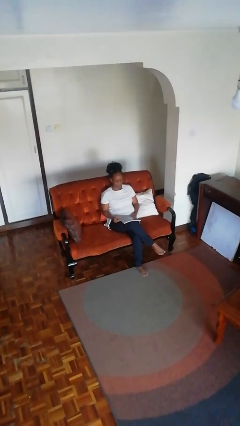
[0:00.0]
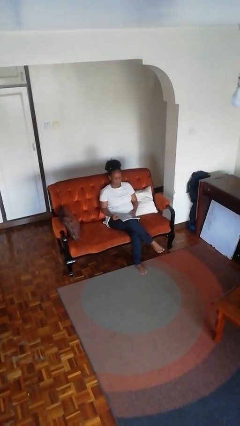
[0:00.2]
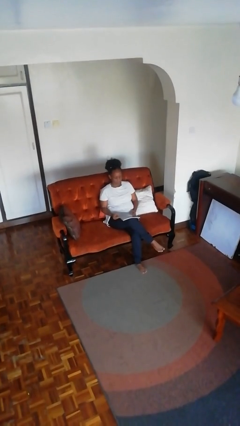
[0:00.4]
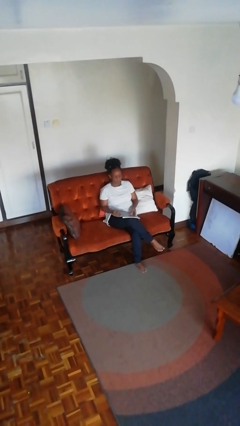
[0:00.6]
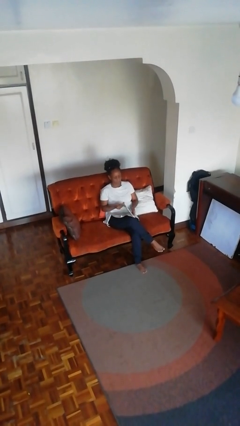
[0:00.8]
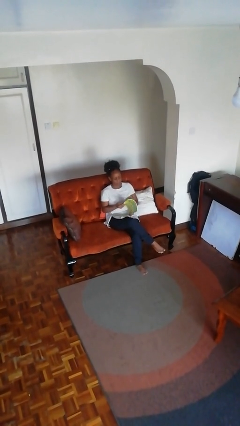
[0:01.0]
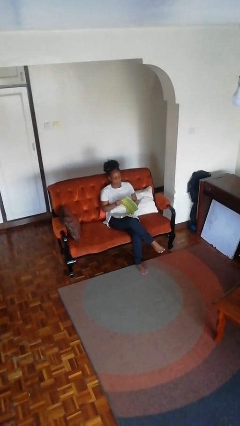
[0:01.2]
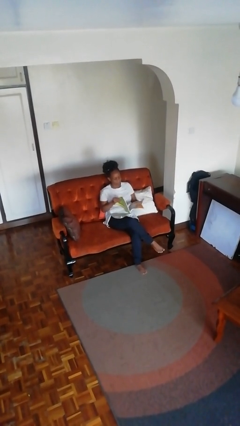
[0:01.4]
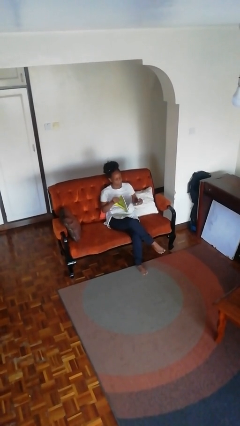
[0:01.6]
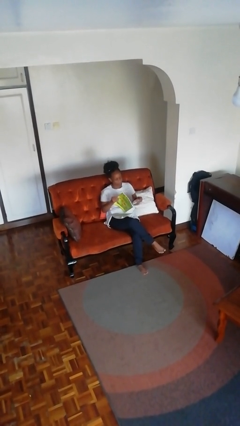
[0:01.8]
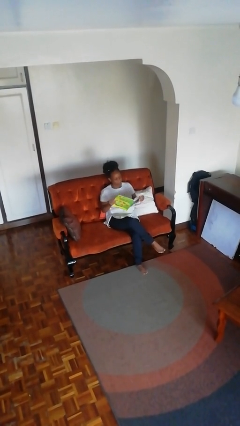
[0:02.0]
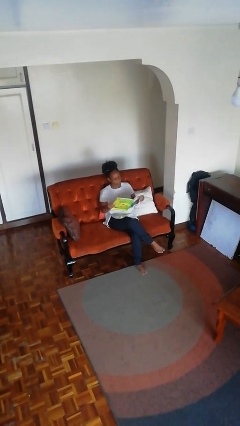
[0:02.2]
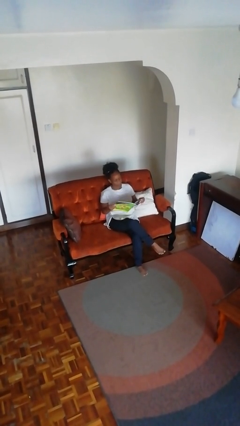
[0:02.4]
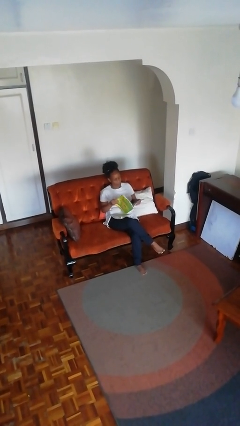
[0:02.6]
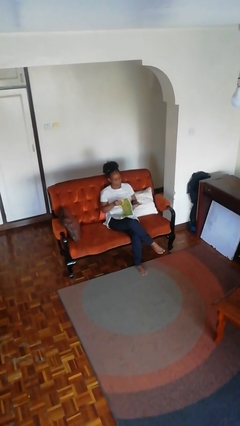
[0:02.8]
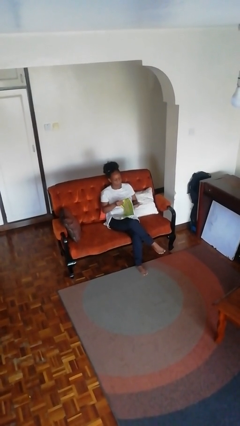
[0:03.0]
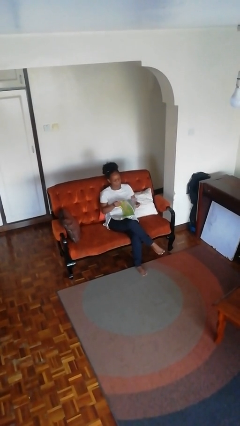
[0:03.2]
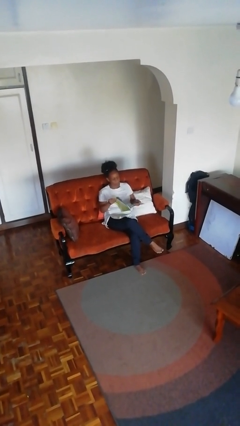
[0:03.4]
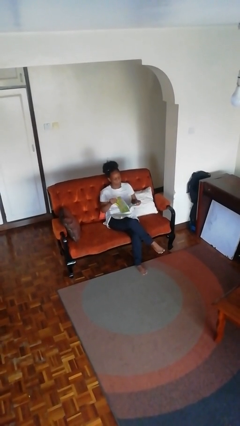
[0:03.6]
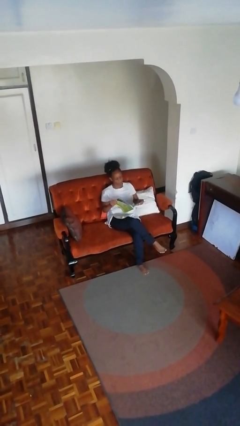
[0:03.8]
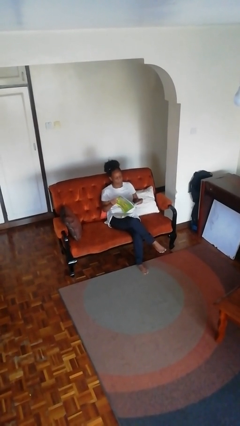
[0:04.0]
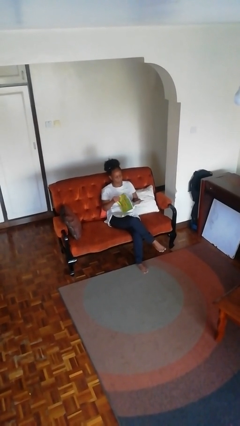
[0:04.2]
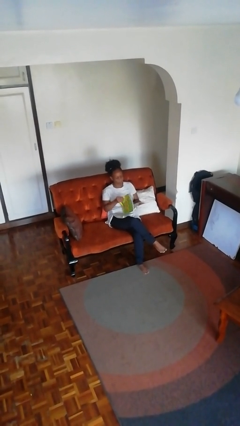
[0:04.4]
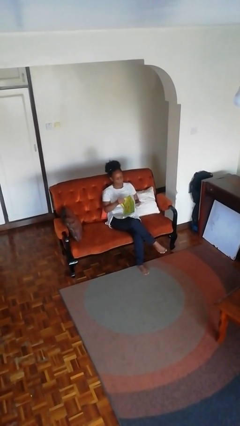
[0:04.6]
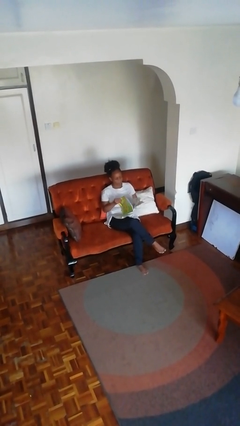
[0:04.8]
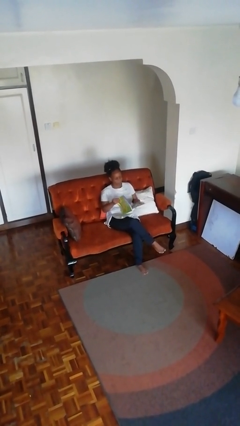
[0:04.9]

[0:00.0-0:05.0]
person reads magazine

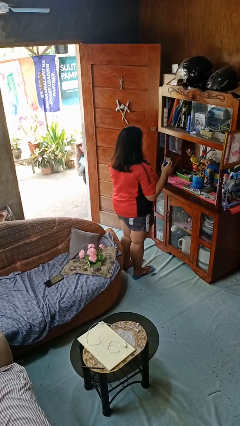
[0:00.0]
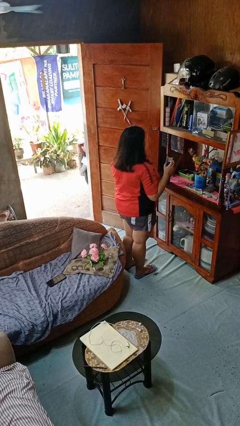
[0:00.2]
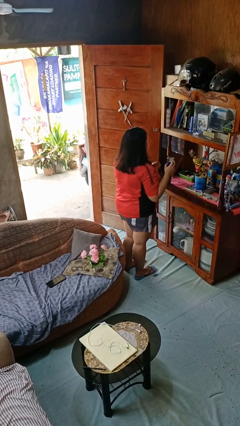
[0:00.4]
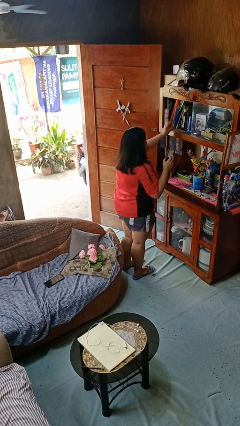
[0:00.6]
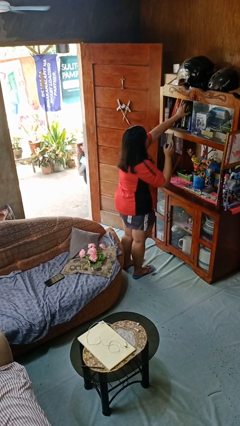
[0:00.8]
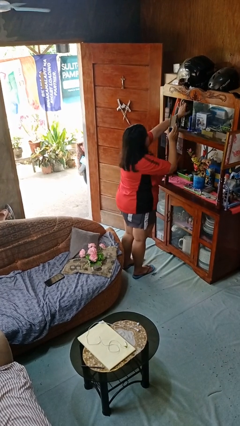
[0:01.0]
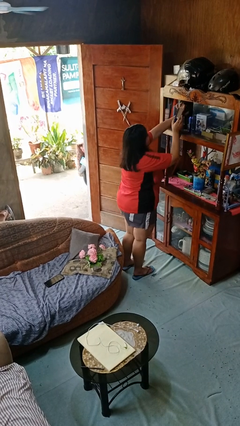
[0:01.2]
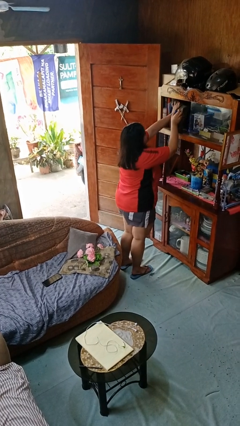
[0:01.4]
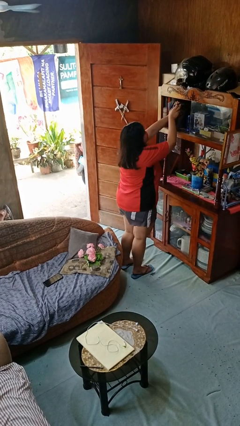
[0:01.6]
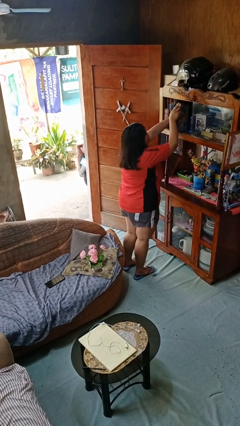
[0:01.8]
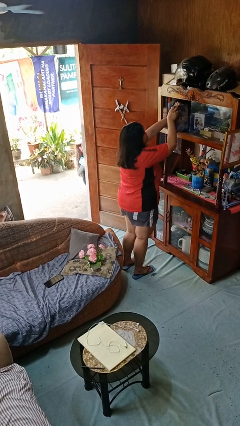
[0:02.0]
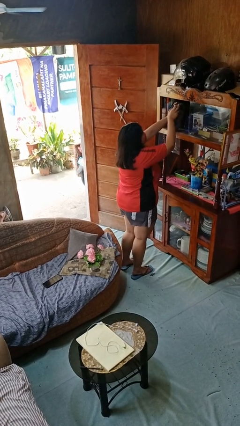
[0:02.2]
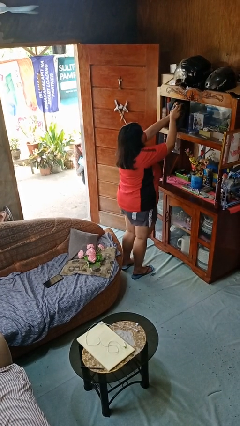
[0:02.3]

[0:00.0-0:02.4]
person puts down object on shelf

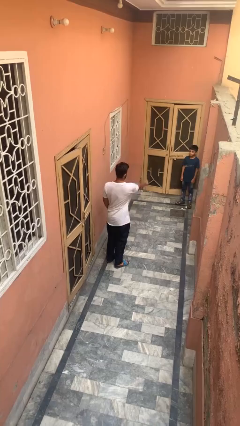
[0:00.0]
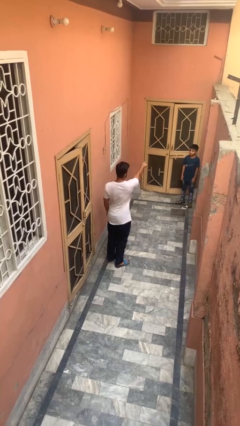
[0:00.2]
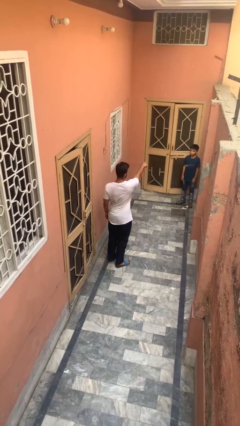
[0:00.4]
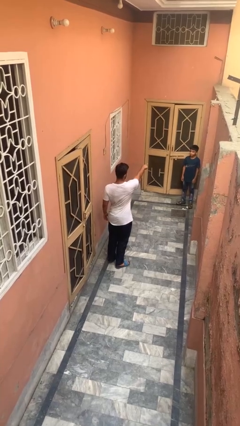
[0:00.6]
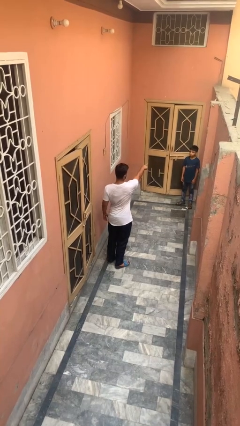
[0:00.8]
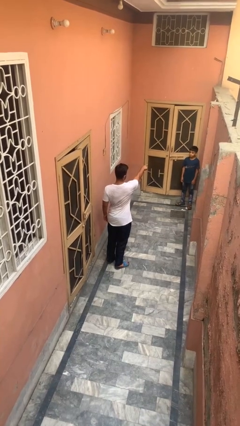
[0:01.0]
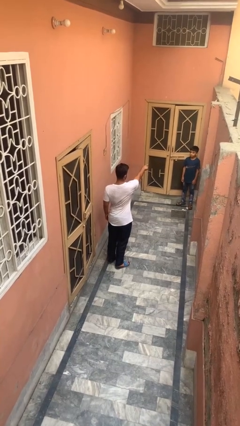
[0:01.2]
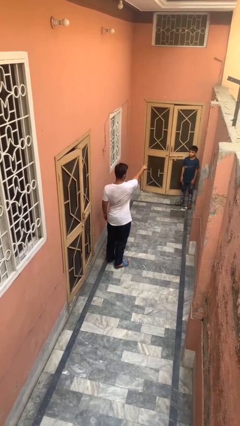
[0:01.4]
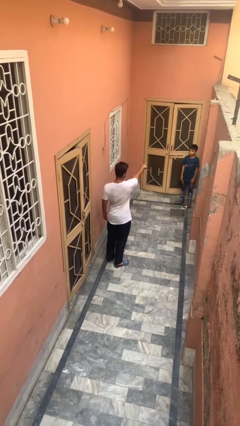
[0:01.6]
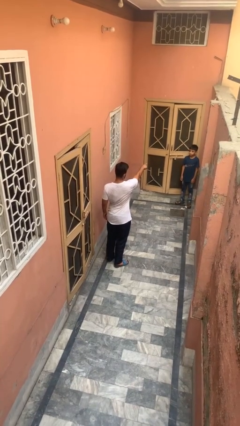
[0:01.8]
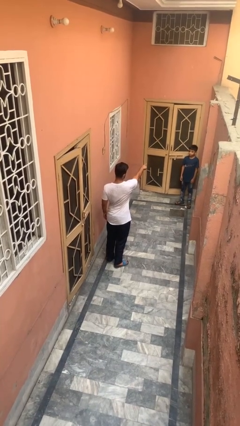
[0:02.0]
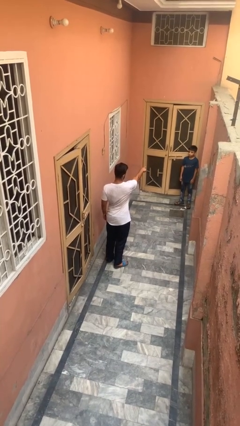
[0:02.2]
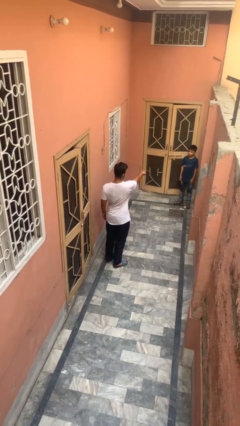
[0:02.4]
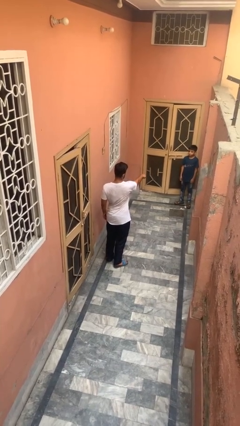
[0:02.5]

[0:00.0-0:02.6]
person points at person

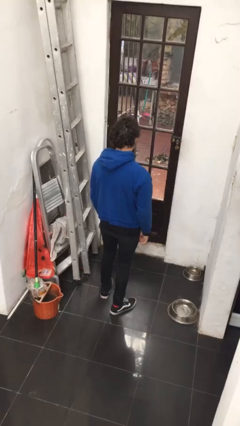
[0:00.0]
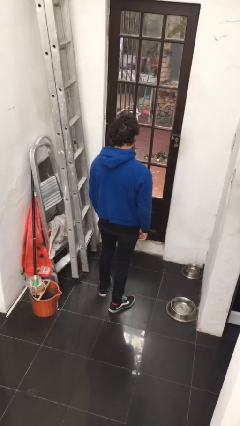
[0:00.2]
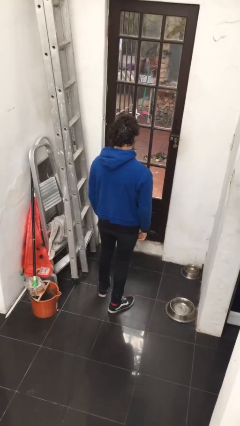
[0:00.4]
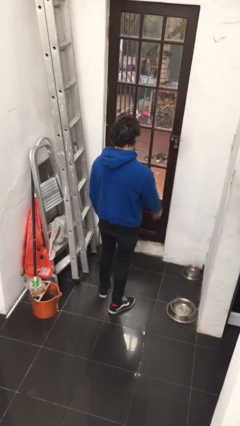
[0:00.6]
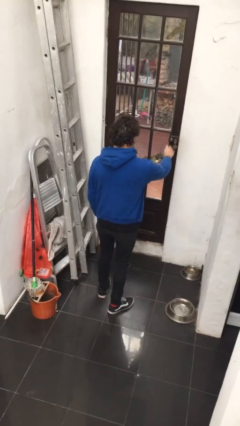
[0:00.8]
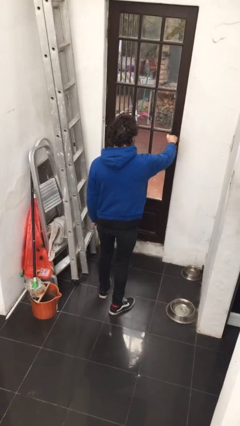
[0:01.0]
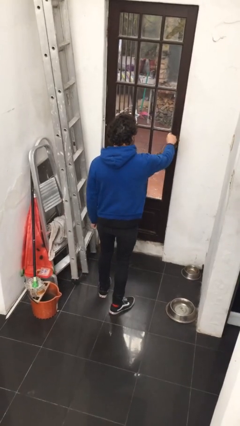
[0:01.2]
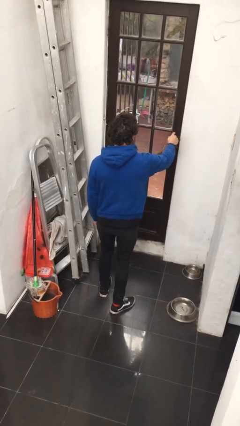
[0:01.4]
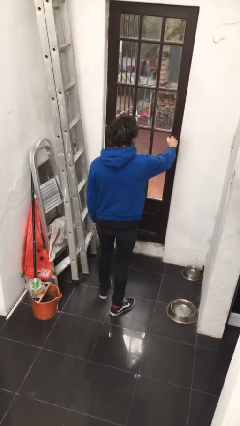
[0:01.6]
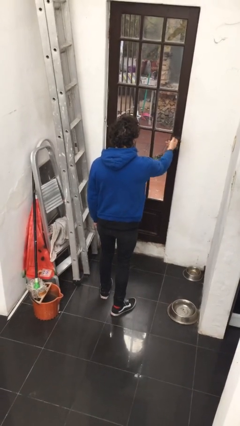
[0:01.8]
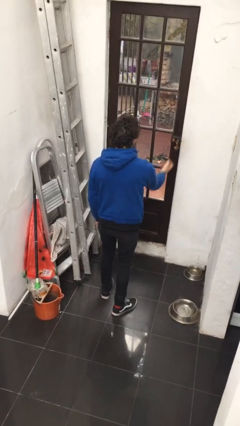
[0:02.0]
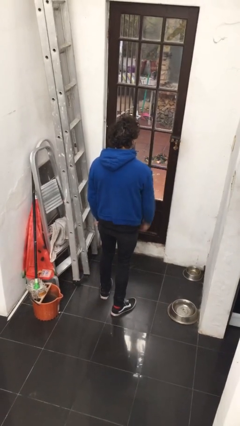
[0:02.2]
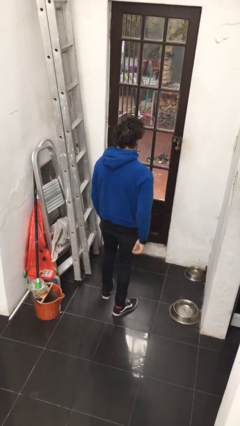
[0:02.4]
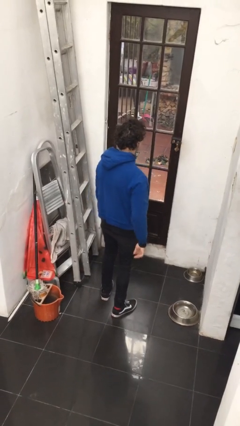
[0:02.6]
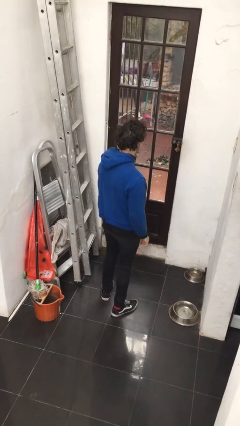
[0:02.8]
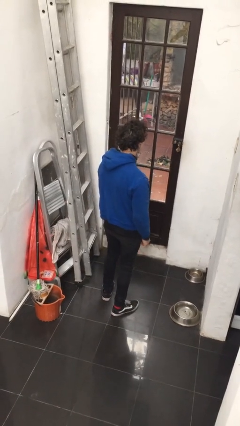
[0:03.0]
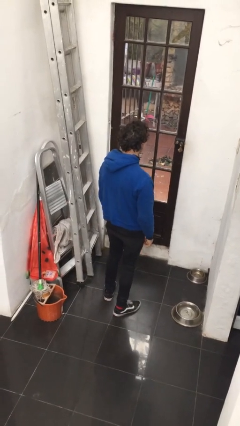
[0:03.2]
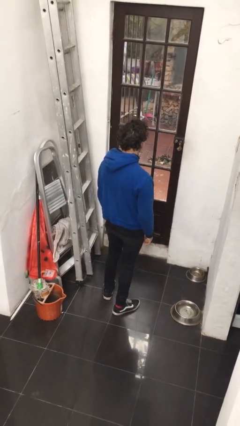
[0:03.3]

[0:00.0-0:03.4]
person locks door with keys

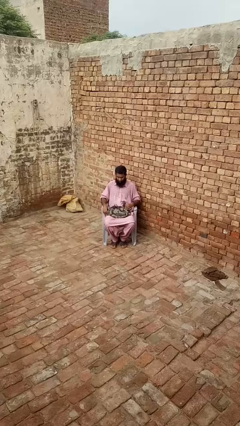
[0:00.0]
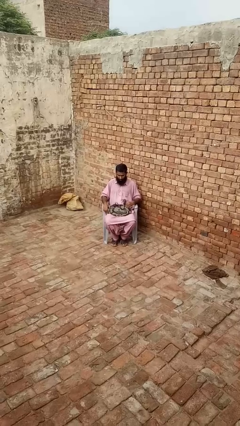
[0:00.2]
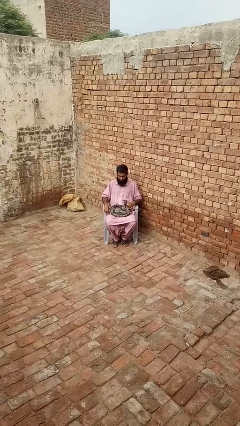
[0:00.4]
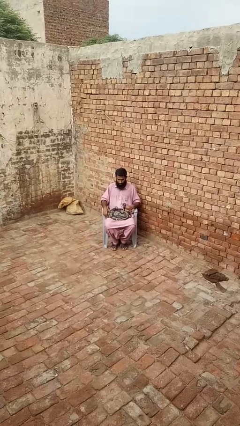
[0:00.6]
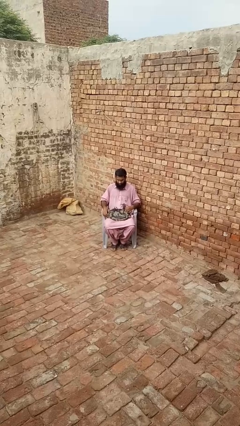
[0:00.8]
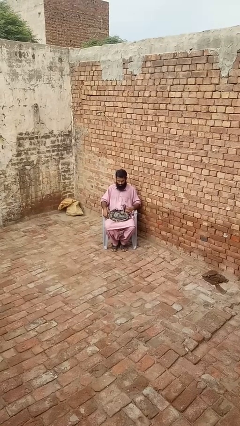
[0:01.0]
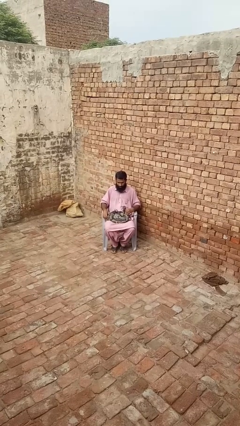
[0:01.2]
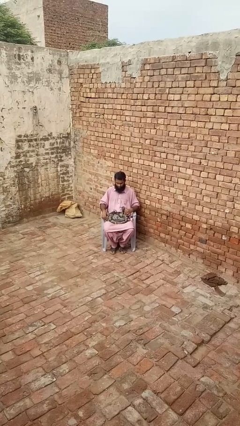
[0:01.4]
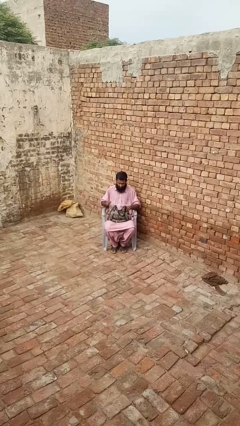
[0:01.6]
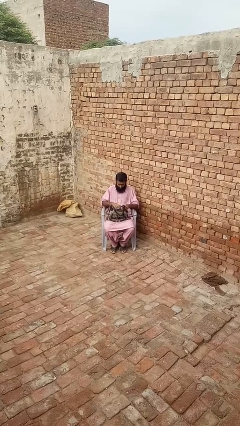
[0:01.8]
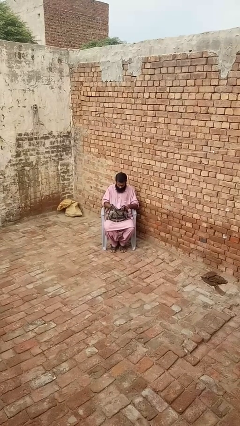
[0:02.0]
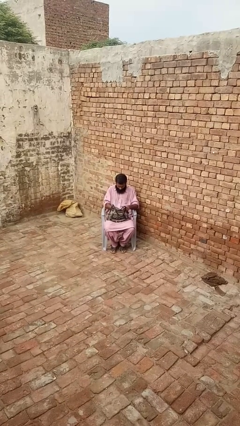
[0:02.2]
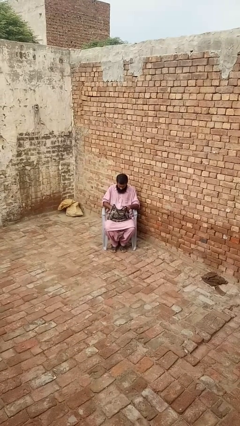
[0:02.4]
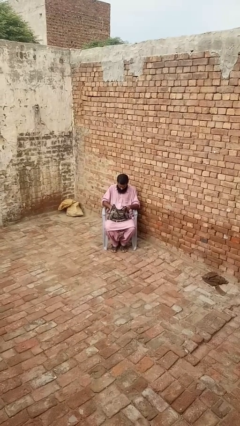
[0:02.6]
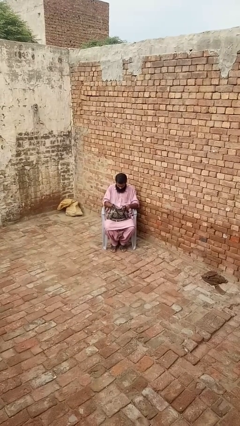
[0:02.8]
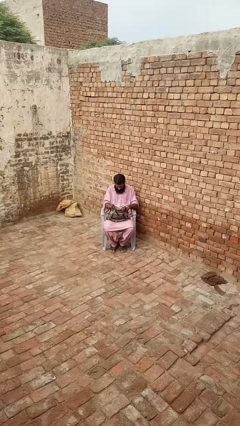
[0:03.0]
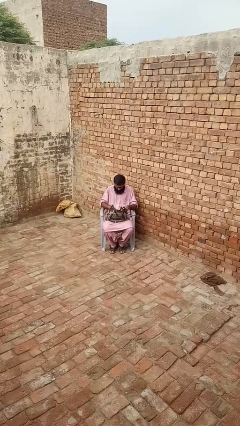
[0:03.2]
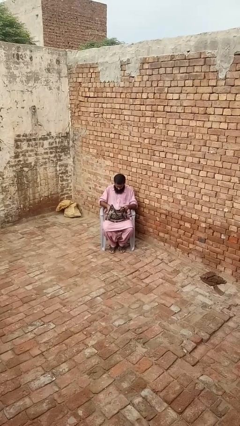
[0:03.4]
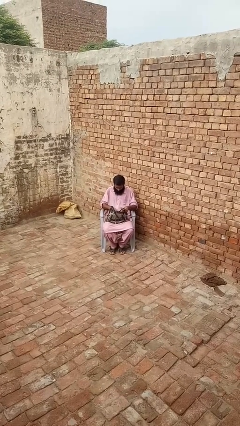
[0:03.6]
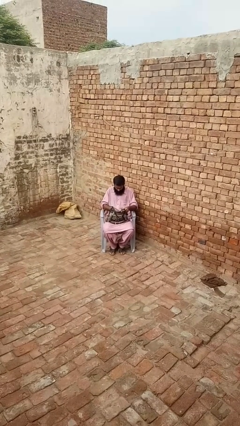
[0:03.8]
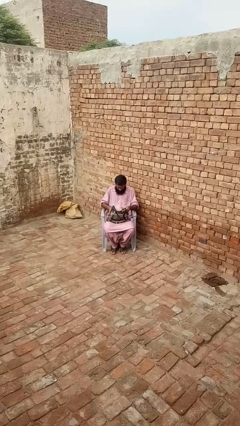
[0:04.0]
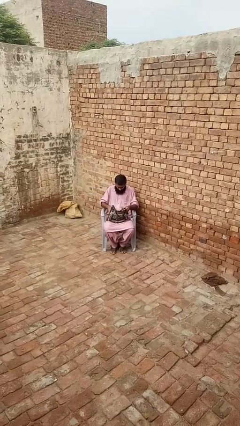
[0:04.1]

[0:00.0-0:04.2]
person searches in purse
